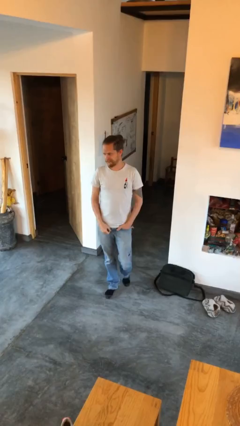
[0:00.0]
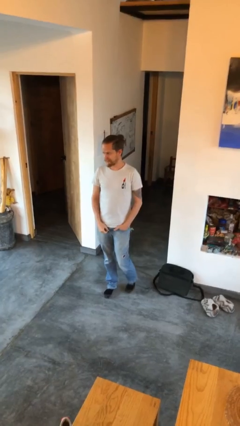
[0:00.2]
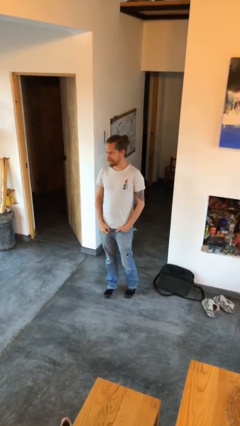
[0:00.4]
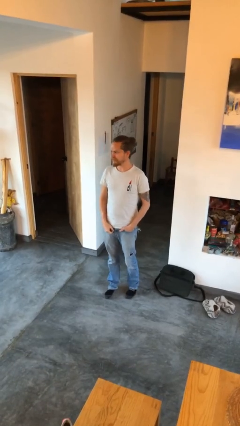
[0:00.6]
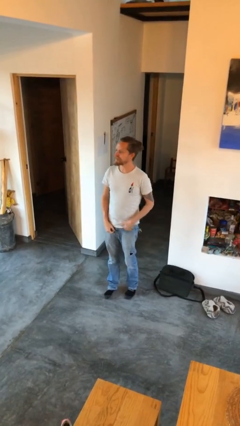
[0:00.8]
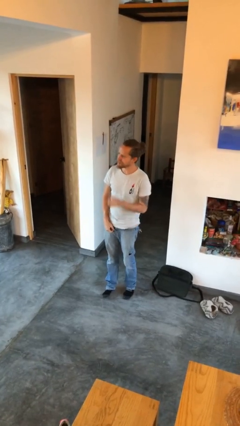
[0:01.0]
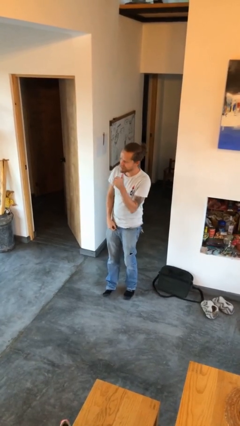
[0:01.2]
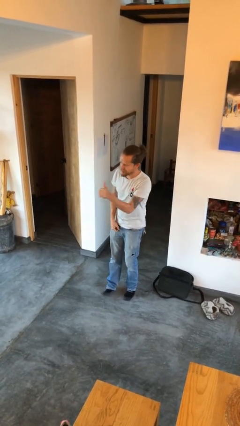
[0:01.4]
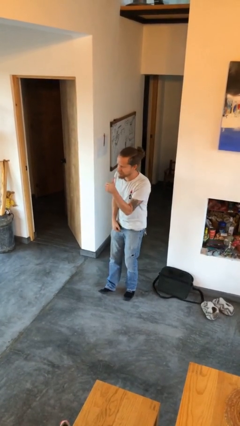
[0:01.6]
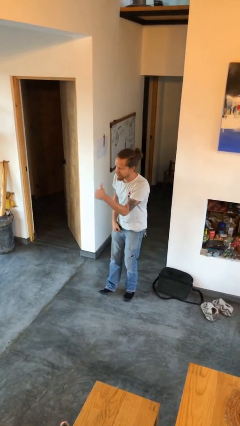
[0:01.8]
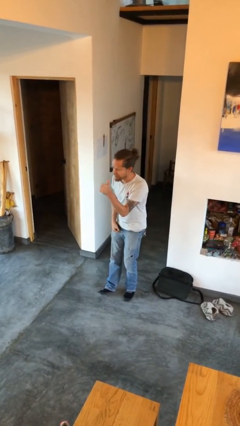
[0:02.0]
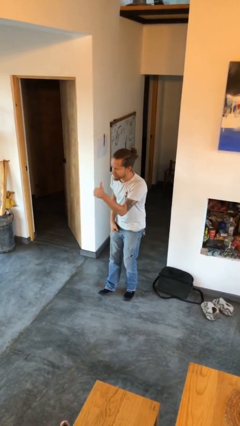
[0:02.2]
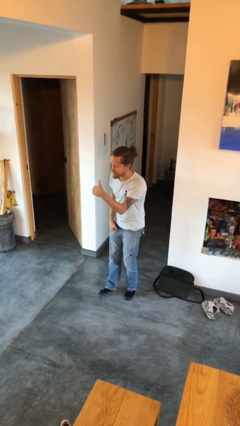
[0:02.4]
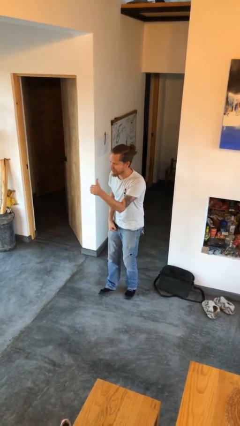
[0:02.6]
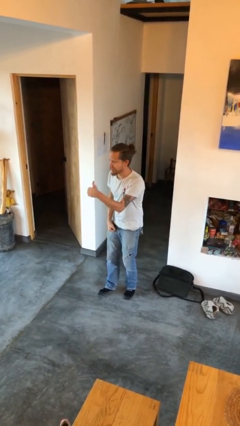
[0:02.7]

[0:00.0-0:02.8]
person gestures thumbs up

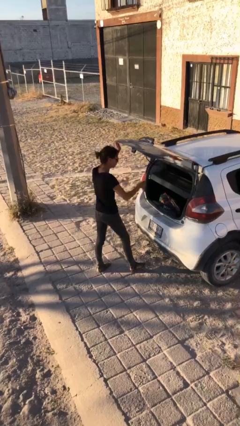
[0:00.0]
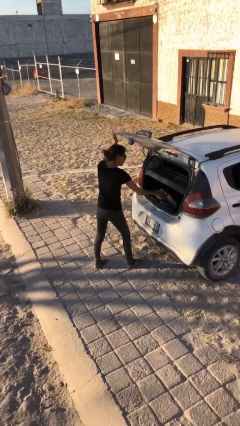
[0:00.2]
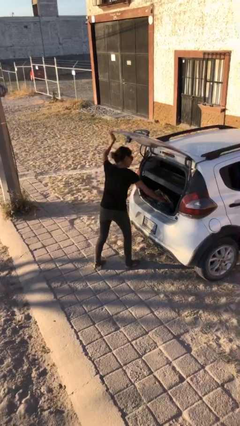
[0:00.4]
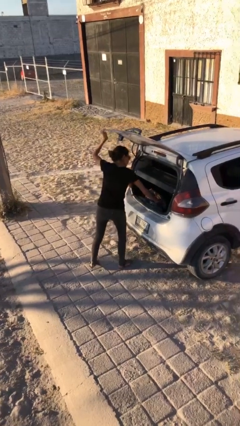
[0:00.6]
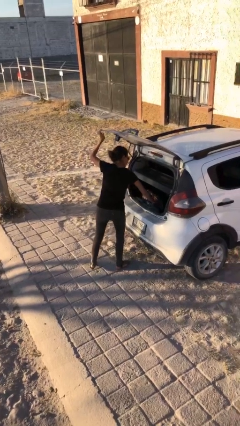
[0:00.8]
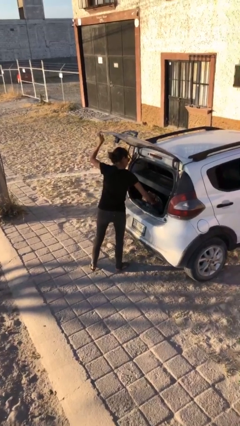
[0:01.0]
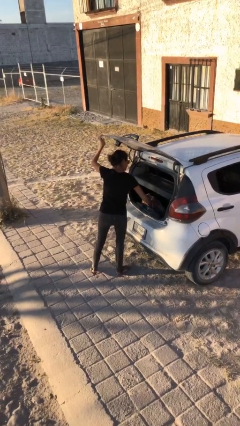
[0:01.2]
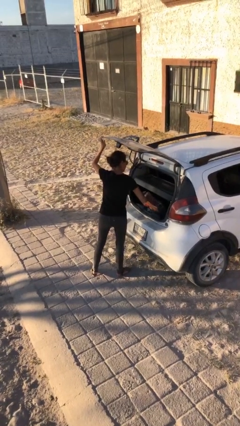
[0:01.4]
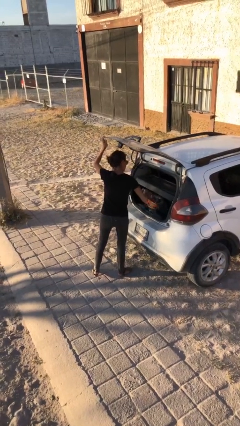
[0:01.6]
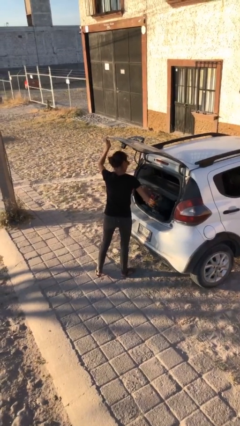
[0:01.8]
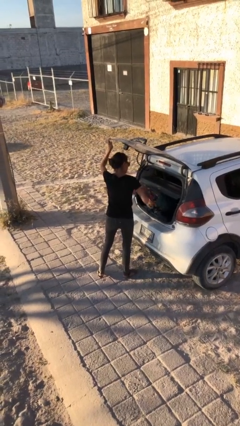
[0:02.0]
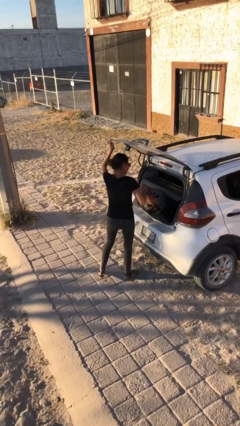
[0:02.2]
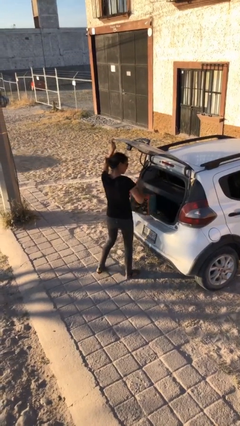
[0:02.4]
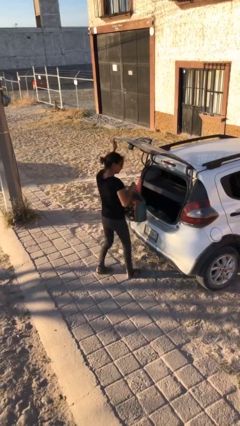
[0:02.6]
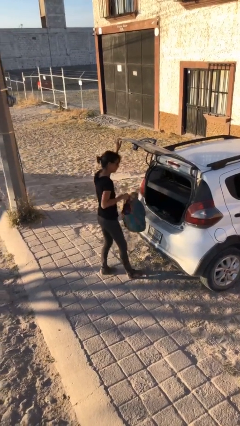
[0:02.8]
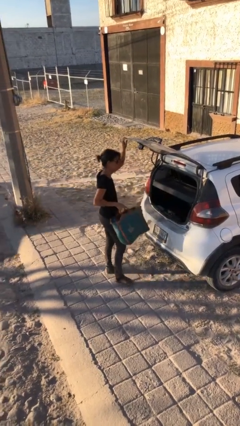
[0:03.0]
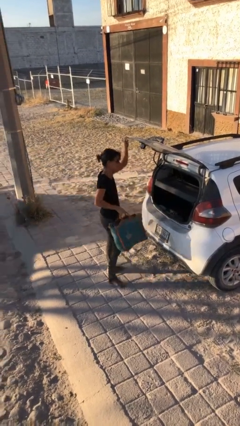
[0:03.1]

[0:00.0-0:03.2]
person unloads car

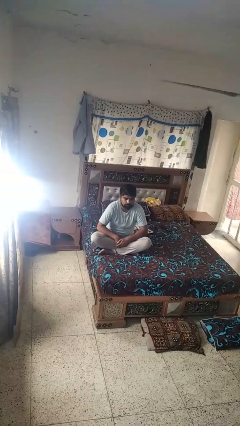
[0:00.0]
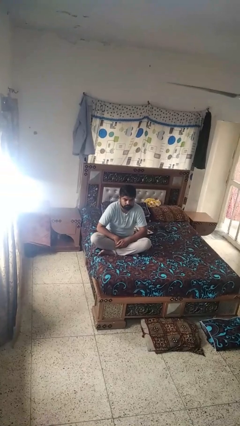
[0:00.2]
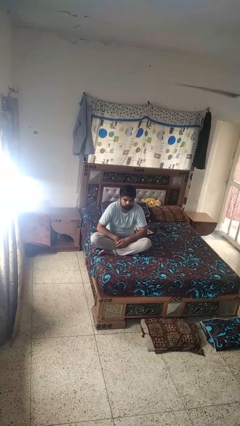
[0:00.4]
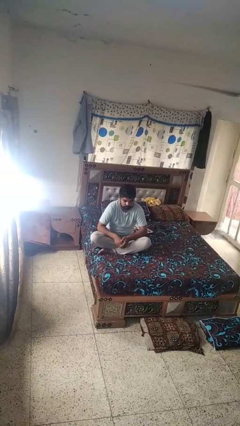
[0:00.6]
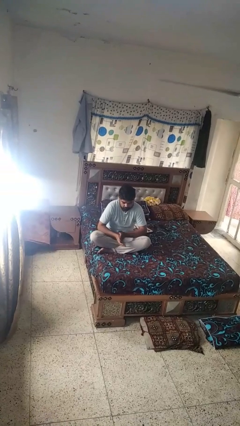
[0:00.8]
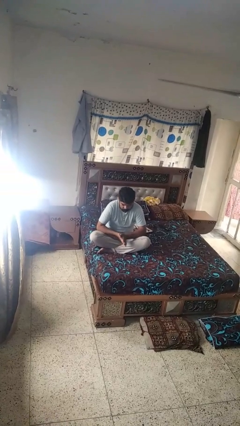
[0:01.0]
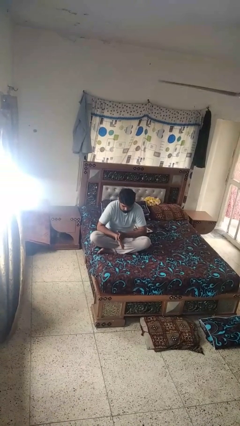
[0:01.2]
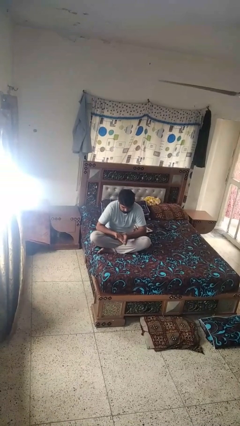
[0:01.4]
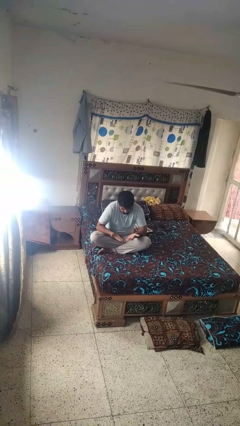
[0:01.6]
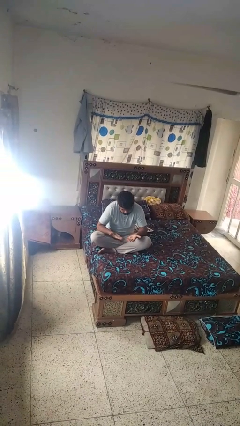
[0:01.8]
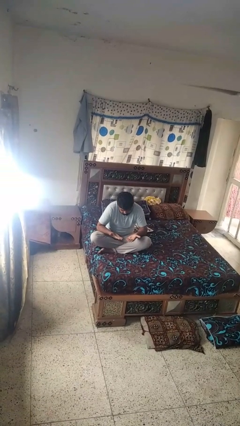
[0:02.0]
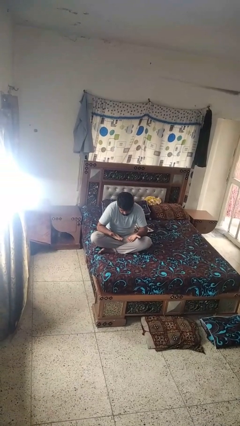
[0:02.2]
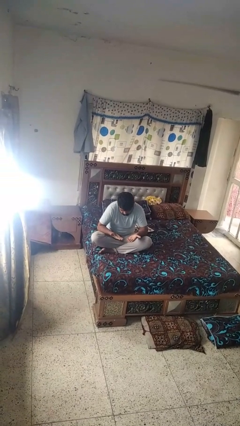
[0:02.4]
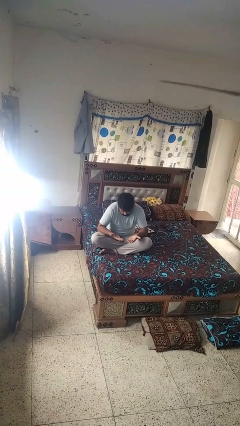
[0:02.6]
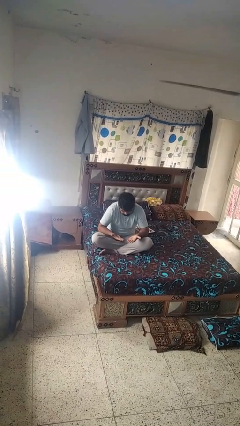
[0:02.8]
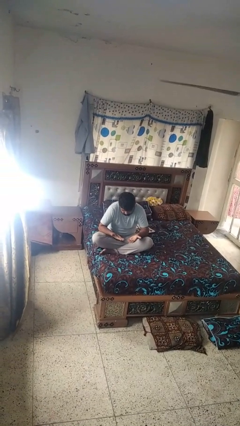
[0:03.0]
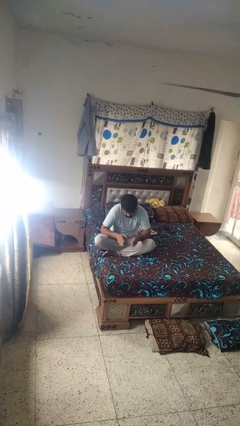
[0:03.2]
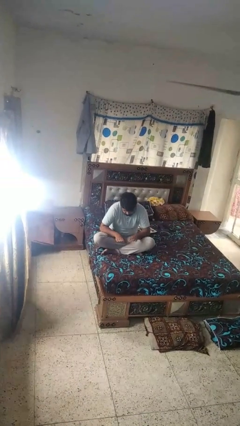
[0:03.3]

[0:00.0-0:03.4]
person looks at hands in lap

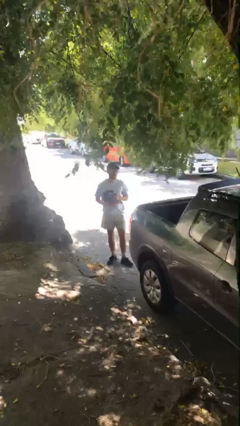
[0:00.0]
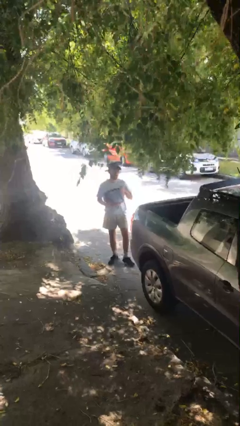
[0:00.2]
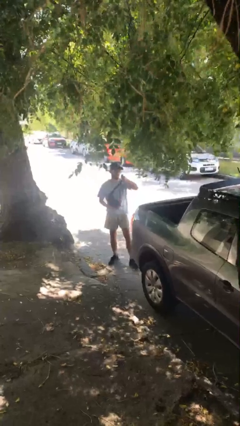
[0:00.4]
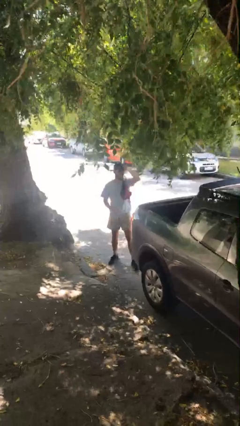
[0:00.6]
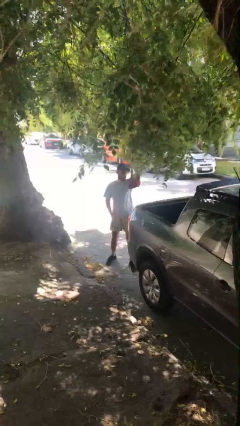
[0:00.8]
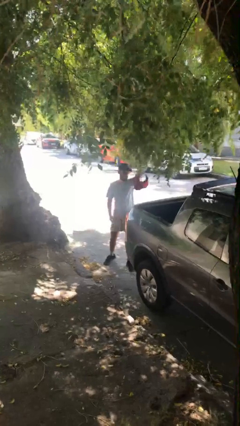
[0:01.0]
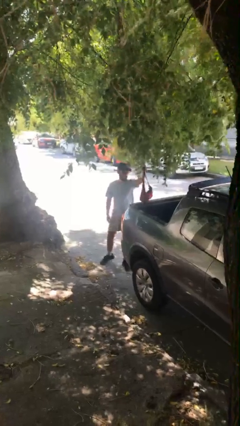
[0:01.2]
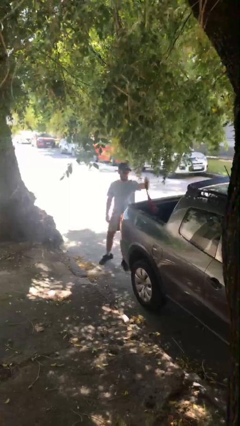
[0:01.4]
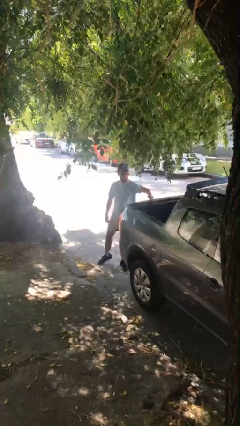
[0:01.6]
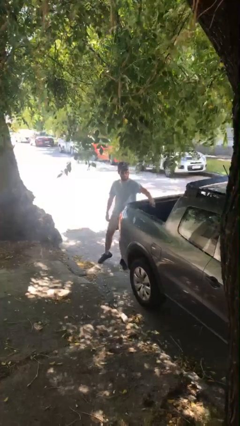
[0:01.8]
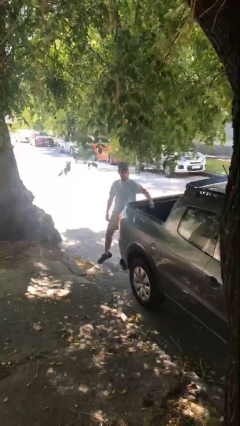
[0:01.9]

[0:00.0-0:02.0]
person loads car

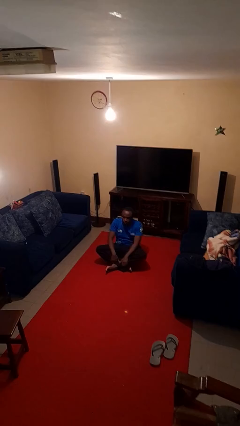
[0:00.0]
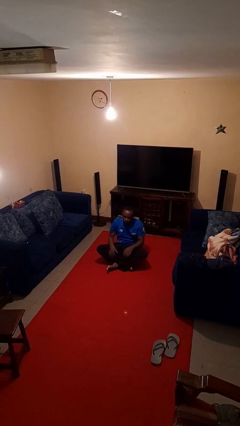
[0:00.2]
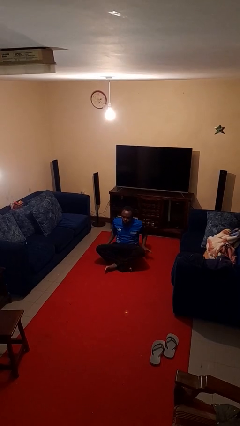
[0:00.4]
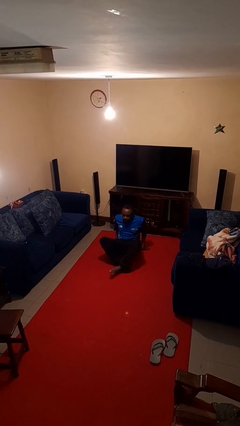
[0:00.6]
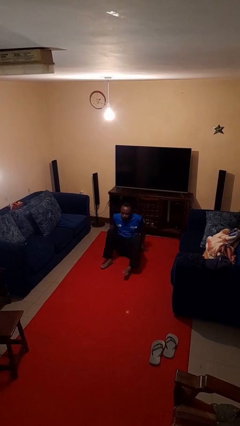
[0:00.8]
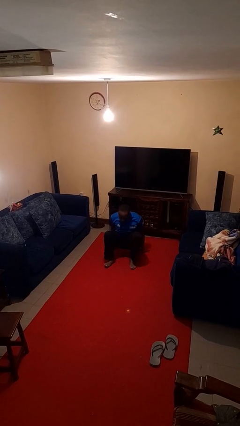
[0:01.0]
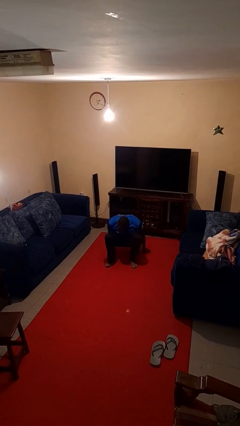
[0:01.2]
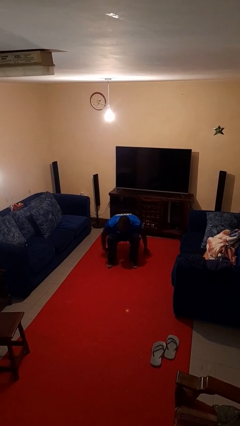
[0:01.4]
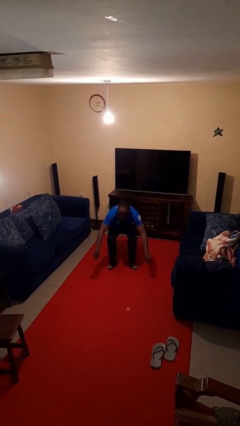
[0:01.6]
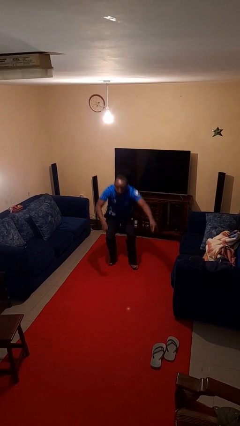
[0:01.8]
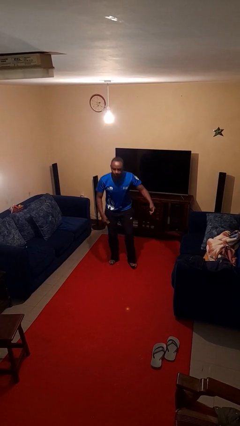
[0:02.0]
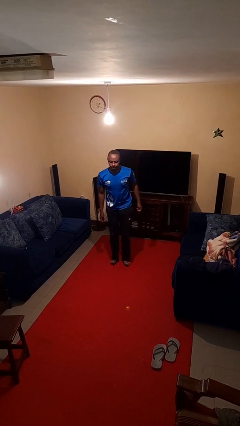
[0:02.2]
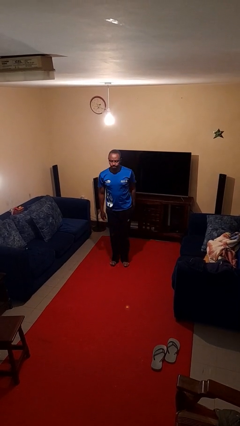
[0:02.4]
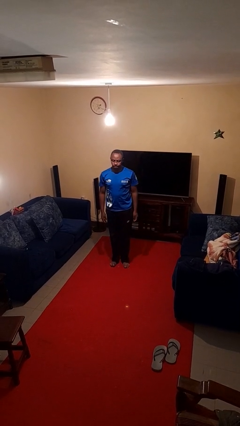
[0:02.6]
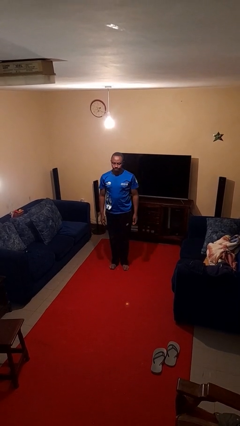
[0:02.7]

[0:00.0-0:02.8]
person stands up from floor

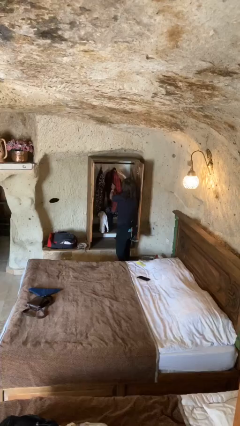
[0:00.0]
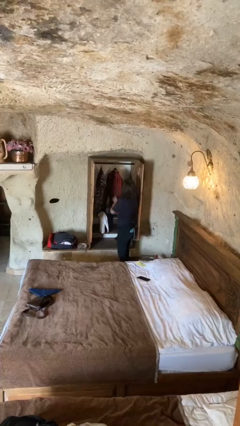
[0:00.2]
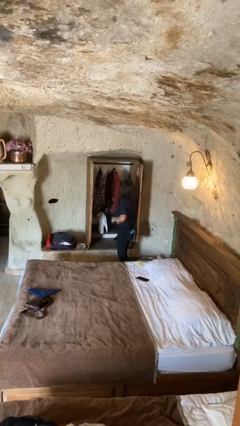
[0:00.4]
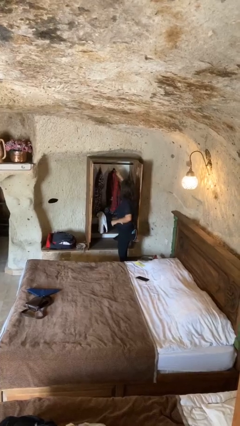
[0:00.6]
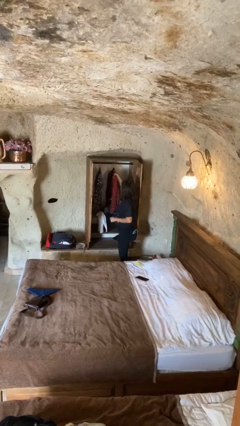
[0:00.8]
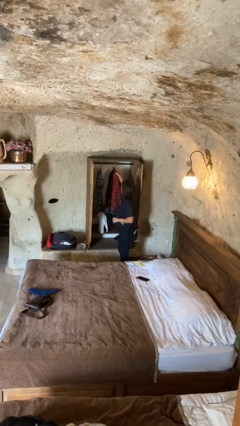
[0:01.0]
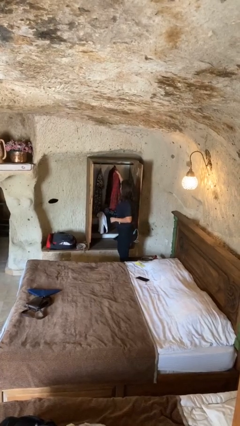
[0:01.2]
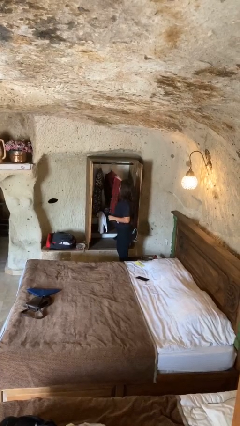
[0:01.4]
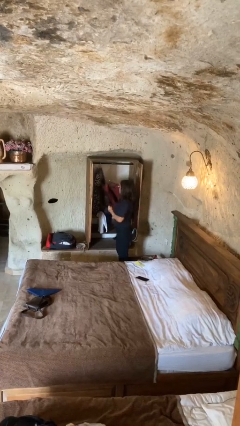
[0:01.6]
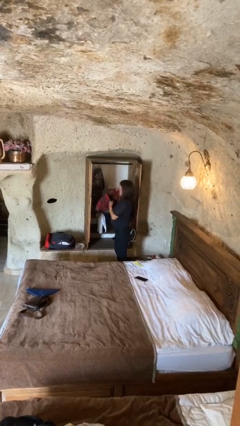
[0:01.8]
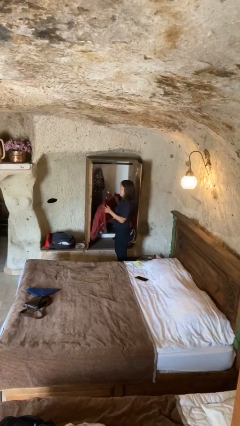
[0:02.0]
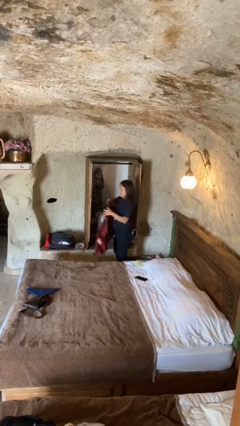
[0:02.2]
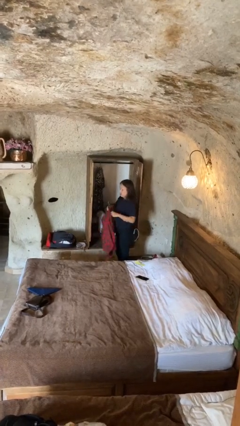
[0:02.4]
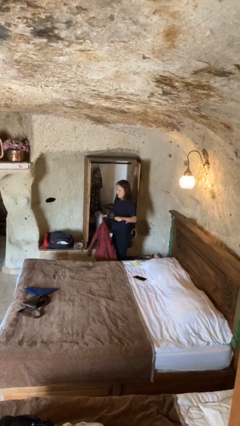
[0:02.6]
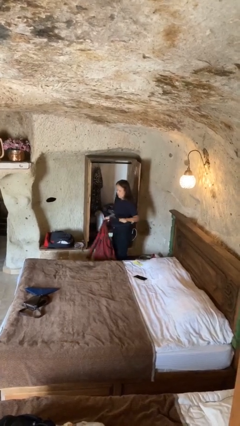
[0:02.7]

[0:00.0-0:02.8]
person takes clothes from closet

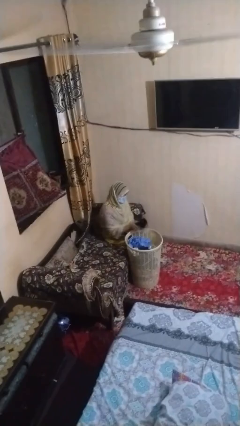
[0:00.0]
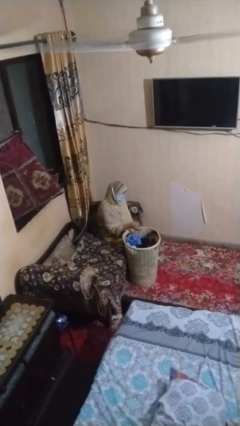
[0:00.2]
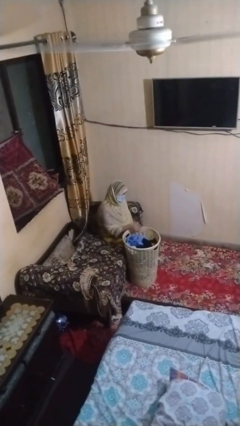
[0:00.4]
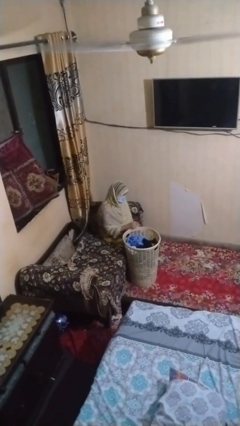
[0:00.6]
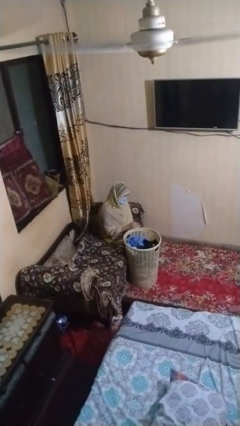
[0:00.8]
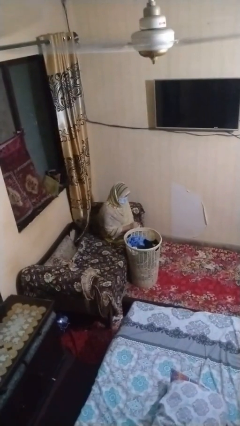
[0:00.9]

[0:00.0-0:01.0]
person puts object into basket
